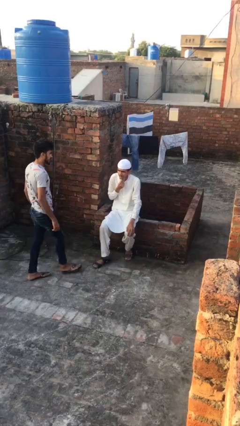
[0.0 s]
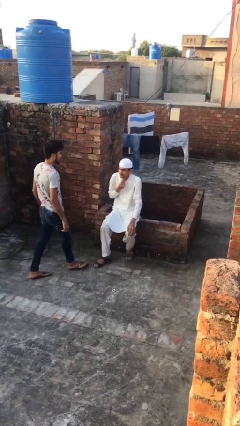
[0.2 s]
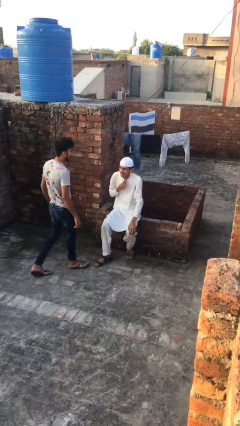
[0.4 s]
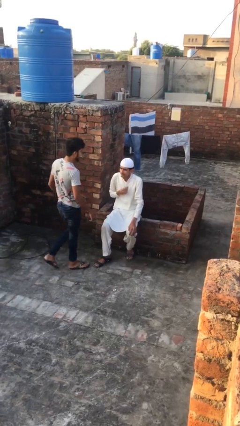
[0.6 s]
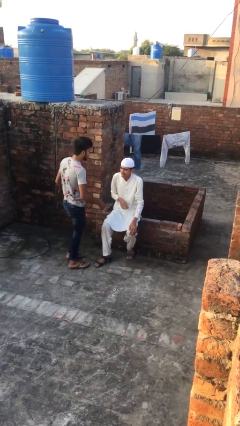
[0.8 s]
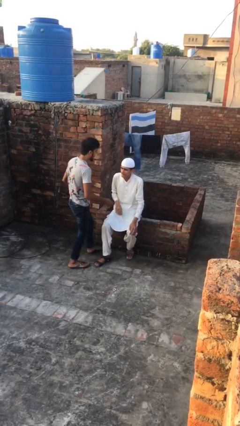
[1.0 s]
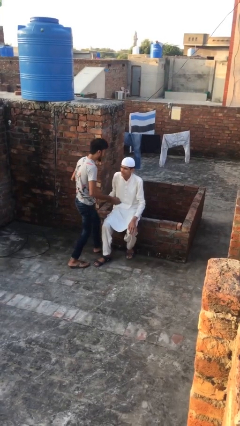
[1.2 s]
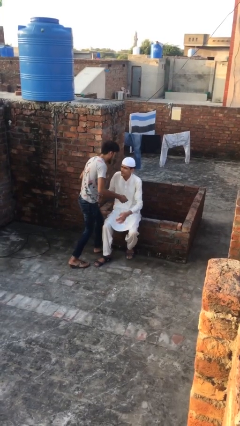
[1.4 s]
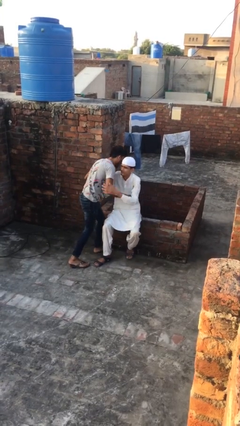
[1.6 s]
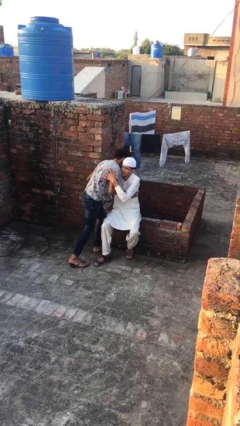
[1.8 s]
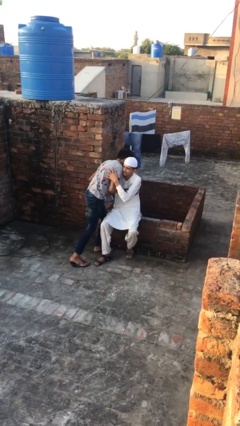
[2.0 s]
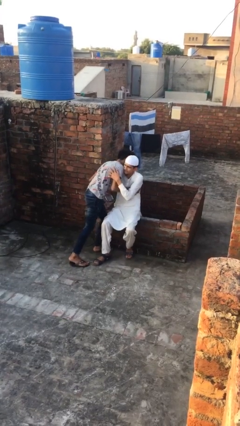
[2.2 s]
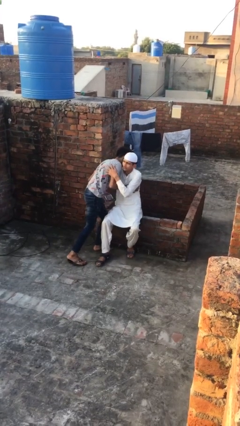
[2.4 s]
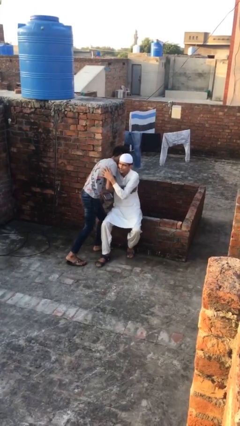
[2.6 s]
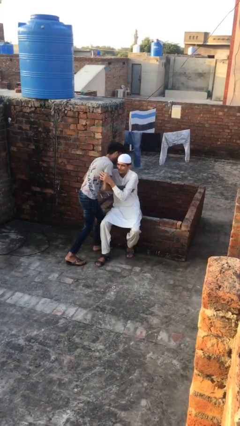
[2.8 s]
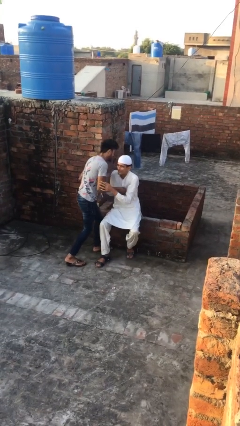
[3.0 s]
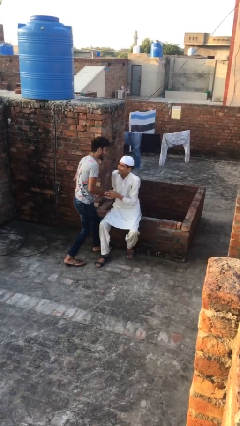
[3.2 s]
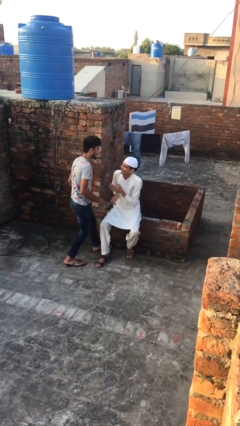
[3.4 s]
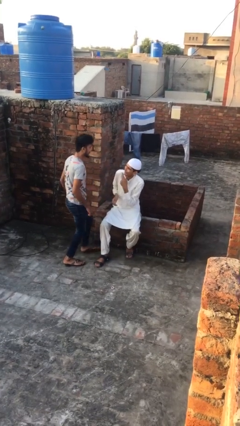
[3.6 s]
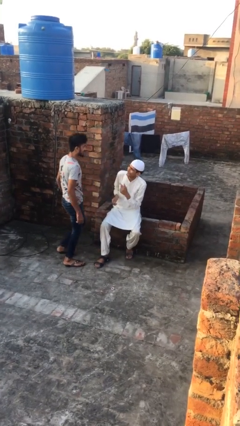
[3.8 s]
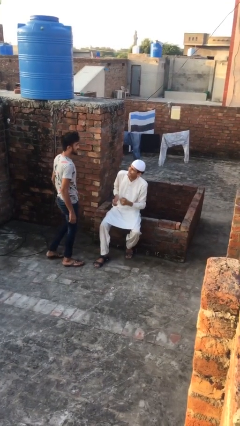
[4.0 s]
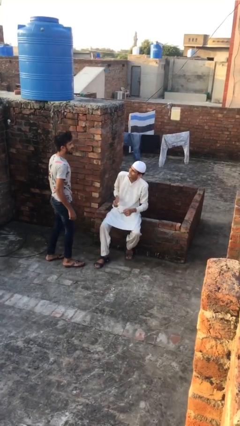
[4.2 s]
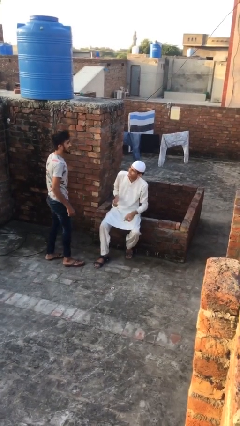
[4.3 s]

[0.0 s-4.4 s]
person embraces person

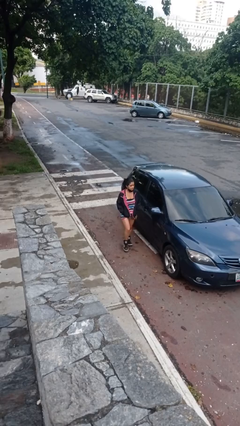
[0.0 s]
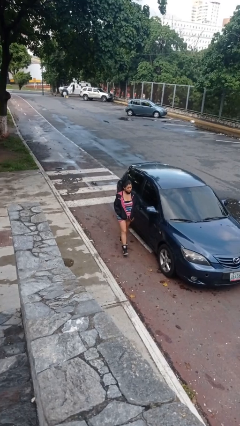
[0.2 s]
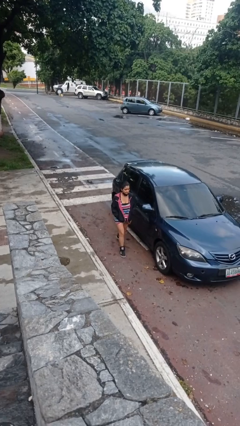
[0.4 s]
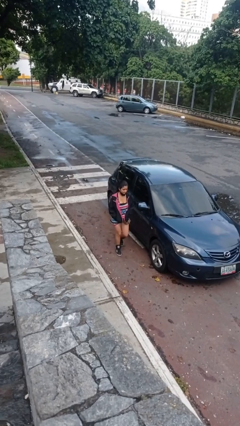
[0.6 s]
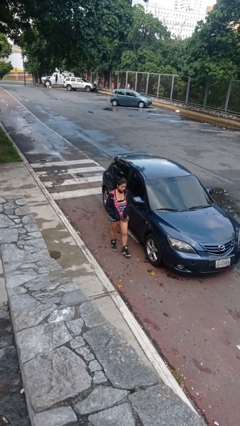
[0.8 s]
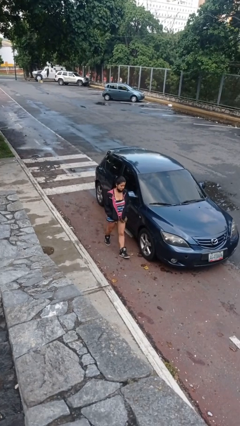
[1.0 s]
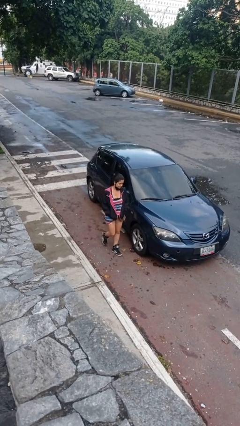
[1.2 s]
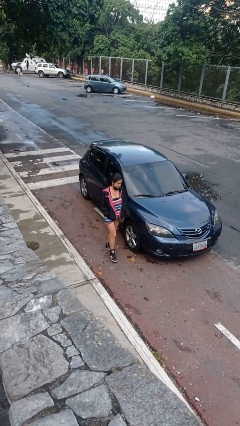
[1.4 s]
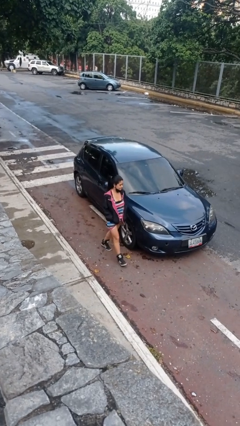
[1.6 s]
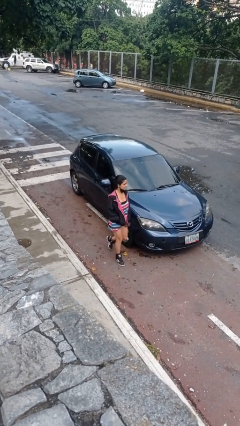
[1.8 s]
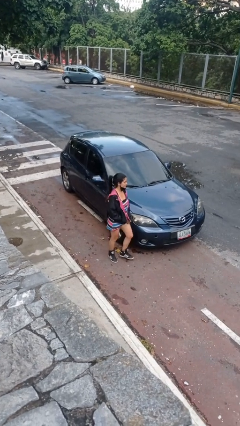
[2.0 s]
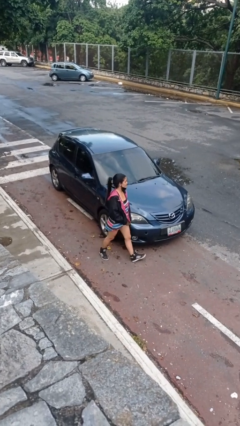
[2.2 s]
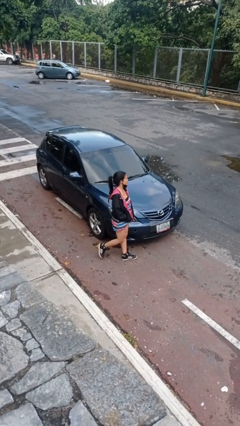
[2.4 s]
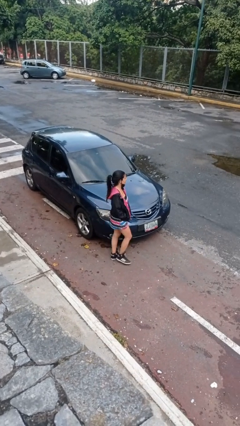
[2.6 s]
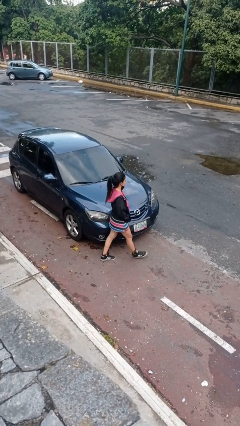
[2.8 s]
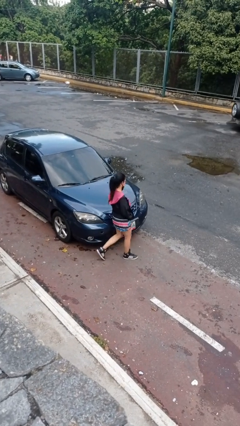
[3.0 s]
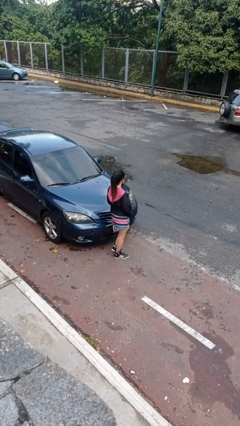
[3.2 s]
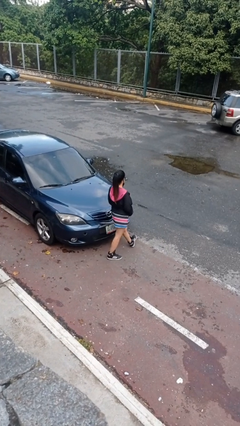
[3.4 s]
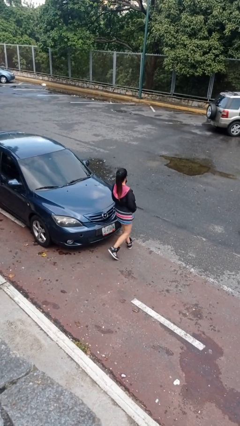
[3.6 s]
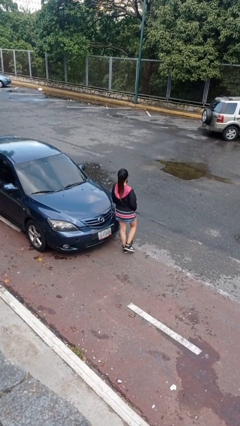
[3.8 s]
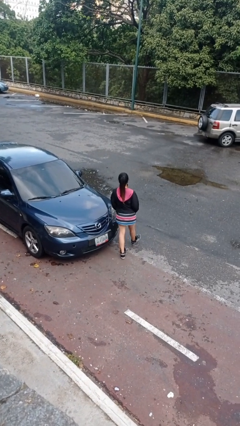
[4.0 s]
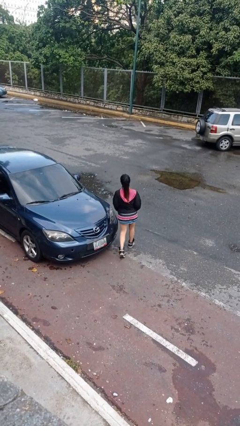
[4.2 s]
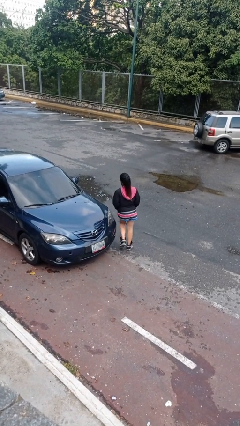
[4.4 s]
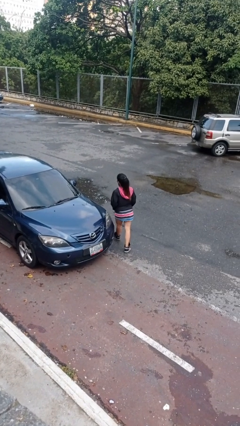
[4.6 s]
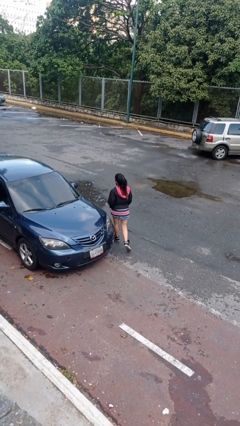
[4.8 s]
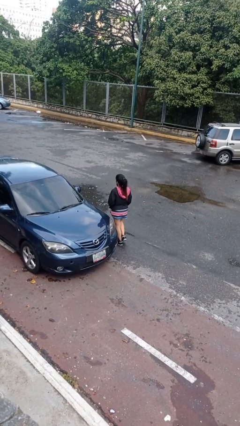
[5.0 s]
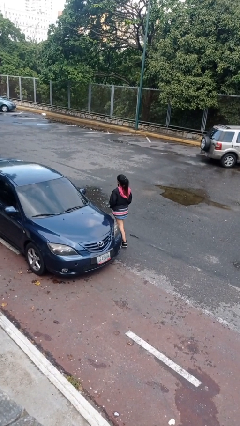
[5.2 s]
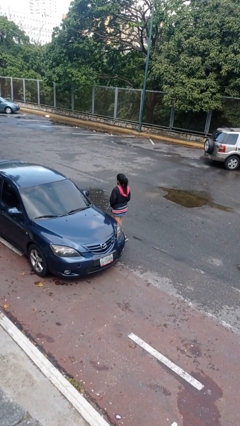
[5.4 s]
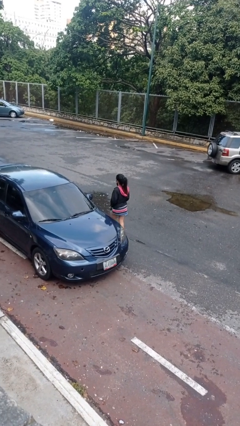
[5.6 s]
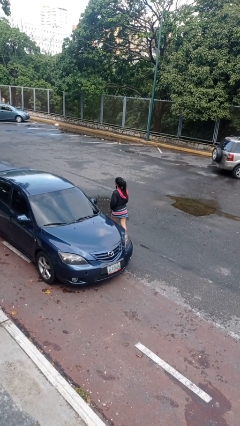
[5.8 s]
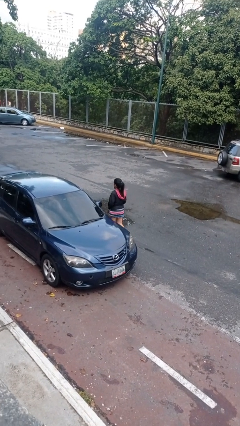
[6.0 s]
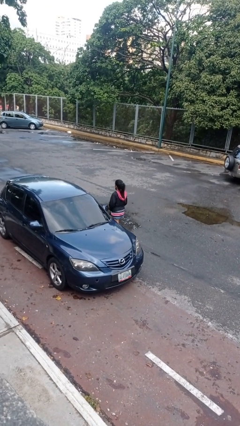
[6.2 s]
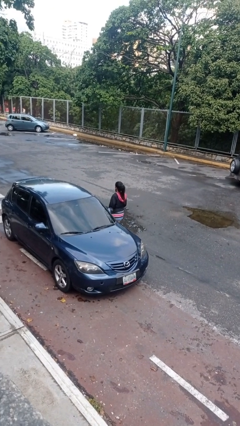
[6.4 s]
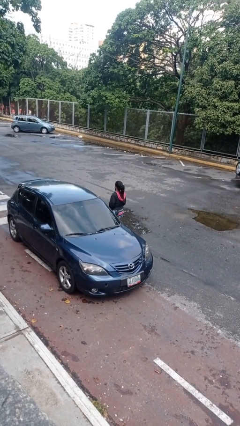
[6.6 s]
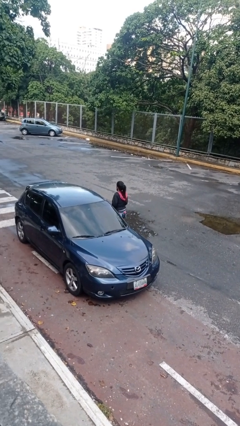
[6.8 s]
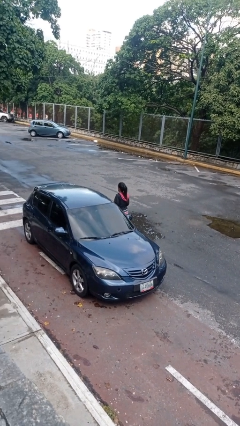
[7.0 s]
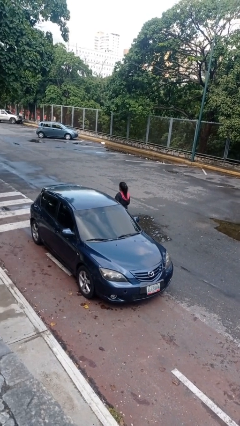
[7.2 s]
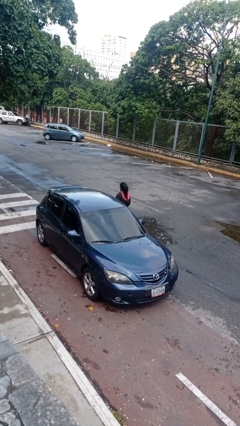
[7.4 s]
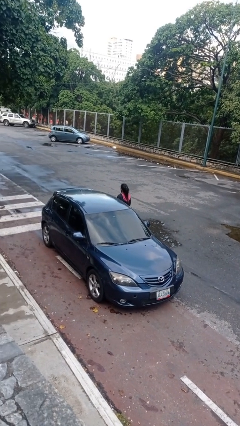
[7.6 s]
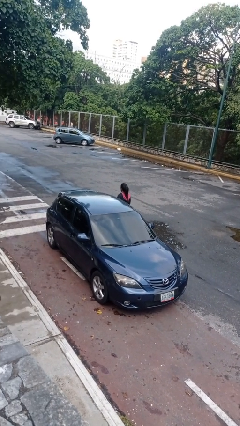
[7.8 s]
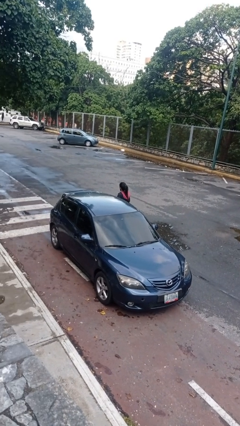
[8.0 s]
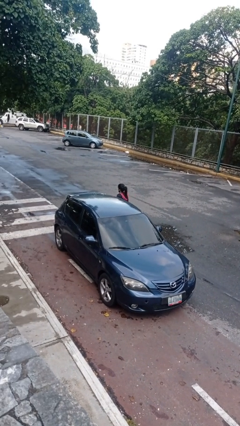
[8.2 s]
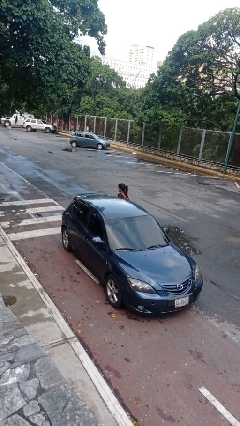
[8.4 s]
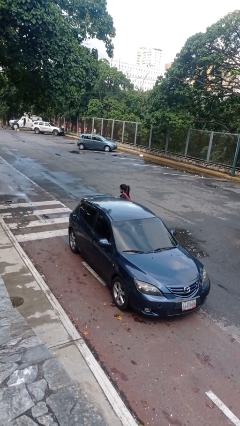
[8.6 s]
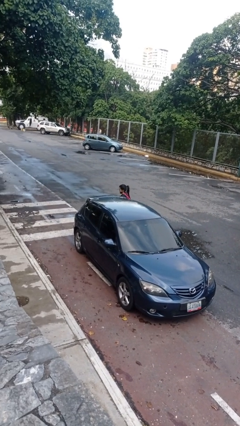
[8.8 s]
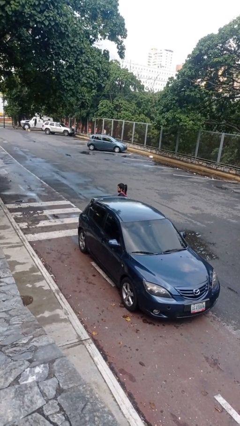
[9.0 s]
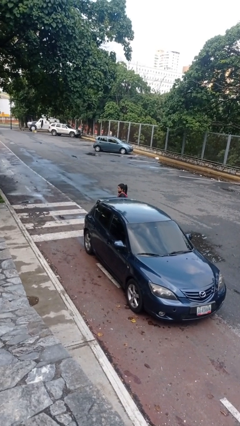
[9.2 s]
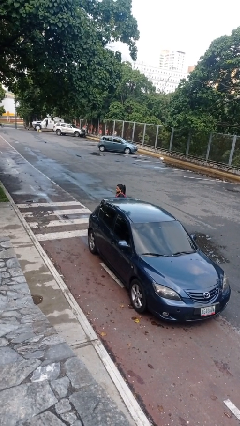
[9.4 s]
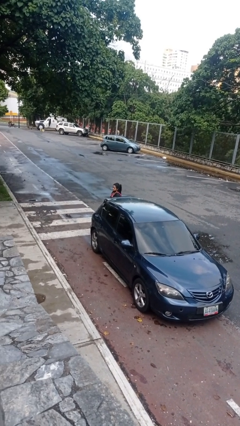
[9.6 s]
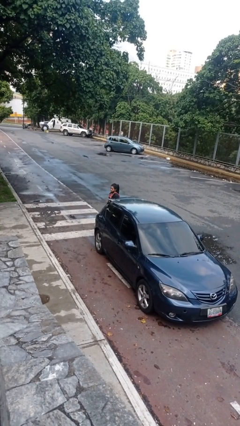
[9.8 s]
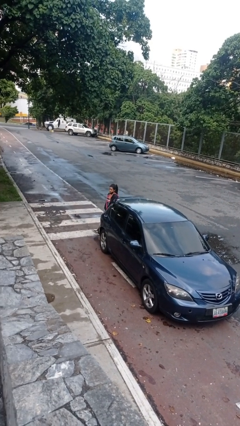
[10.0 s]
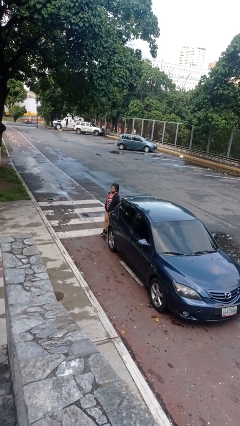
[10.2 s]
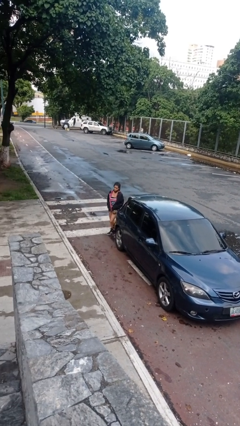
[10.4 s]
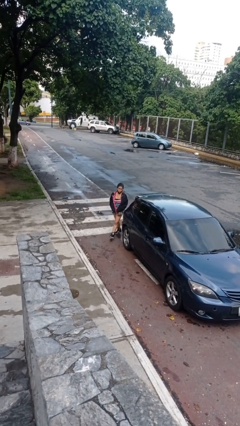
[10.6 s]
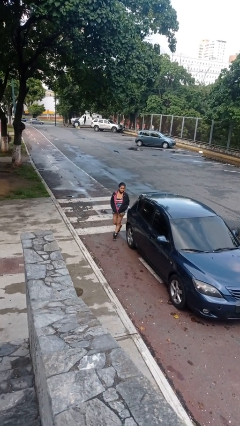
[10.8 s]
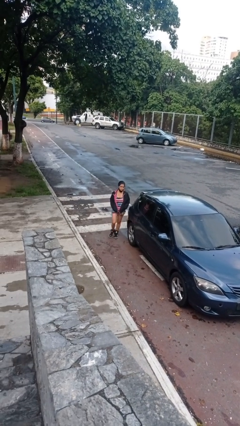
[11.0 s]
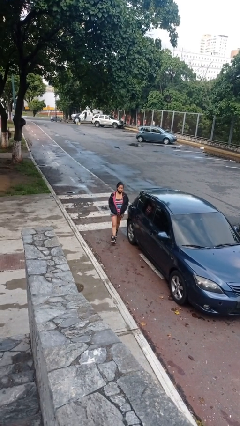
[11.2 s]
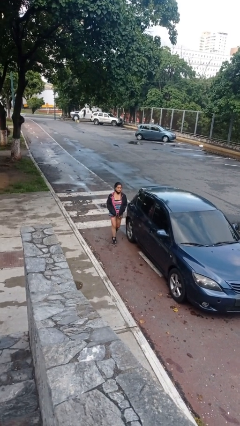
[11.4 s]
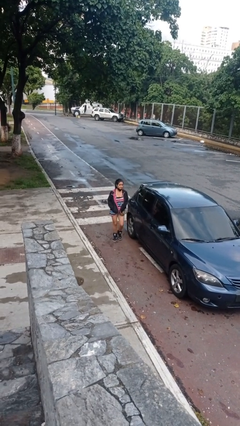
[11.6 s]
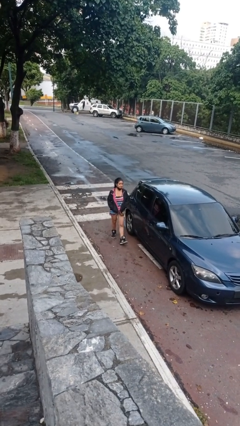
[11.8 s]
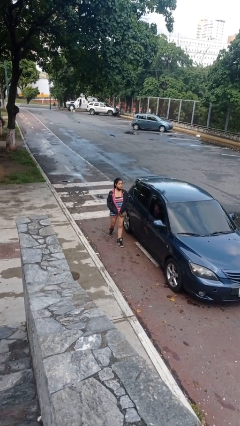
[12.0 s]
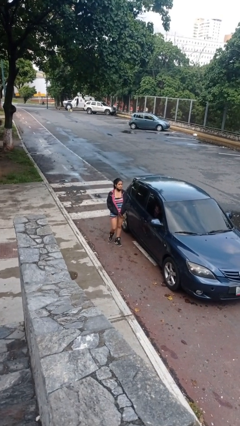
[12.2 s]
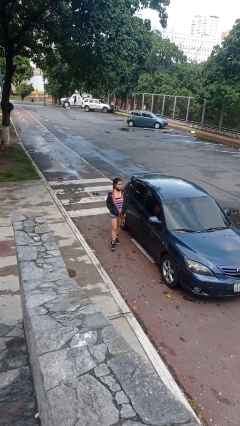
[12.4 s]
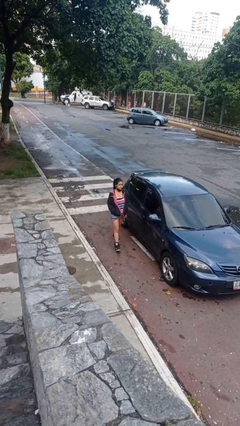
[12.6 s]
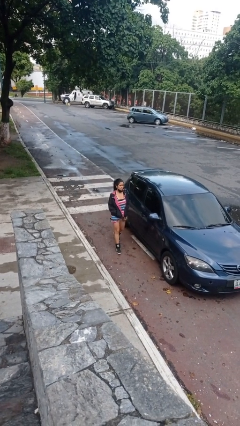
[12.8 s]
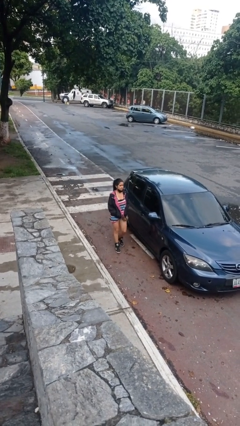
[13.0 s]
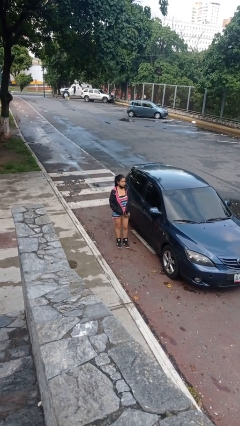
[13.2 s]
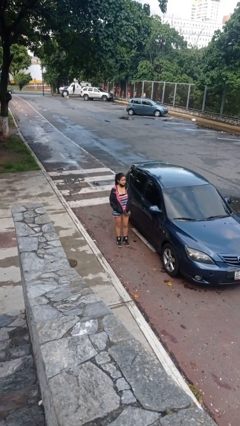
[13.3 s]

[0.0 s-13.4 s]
person walks around car

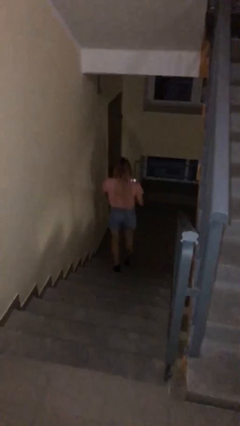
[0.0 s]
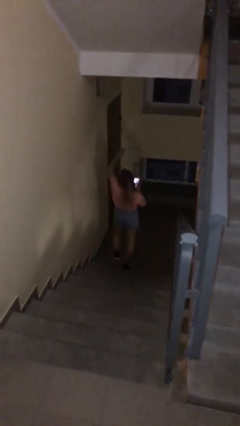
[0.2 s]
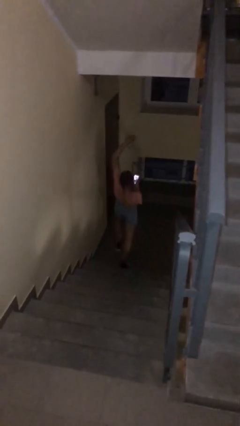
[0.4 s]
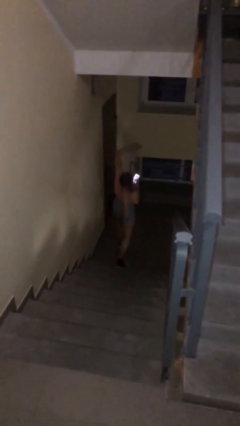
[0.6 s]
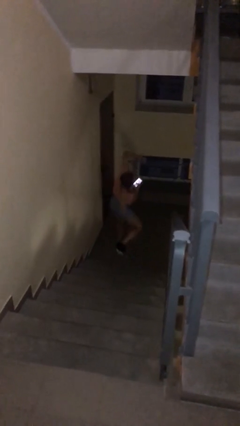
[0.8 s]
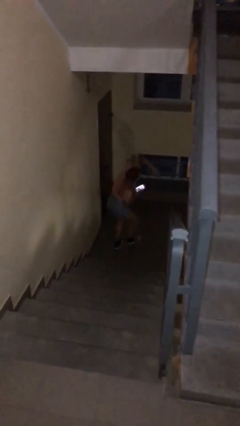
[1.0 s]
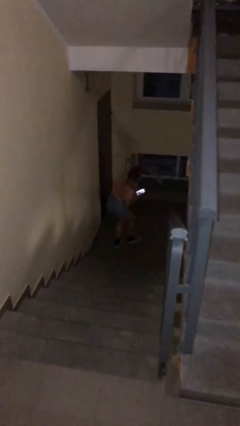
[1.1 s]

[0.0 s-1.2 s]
person trips on stair
